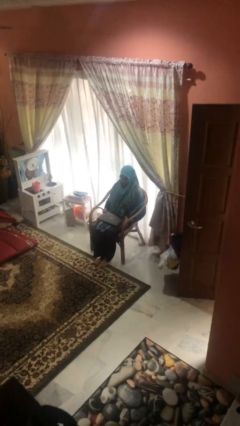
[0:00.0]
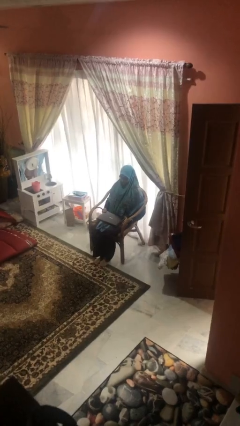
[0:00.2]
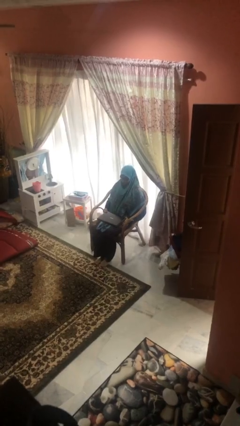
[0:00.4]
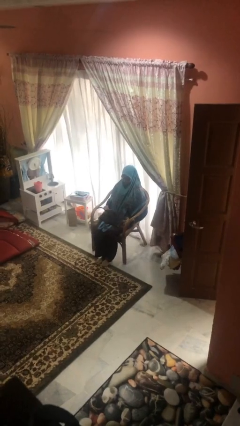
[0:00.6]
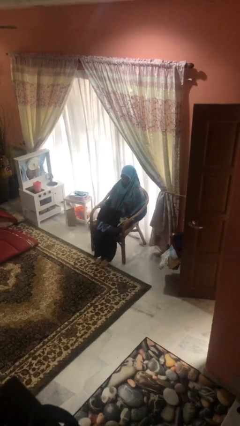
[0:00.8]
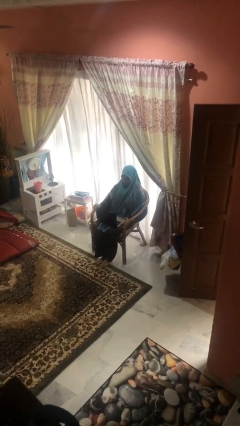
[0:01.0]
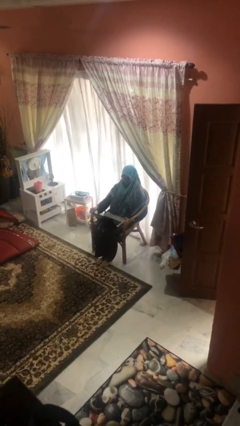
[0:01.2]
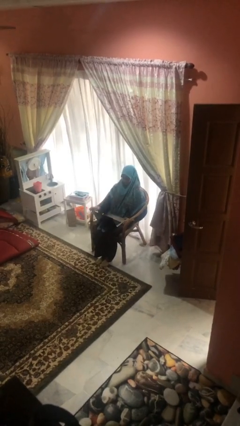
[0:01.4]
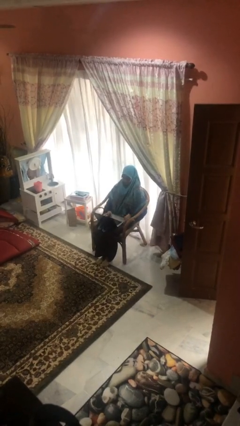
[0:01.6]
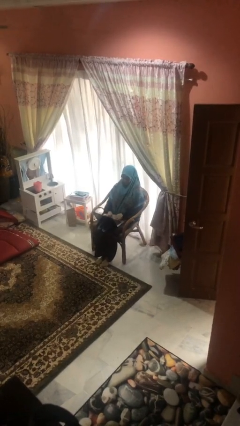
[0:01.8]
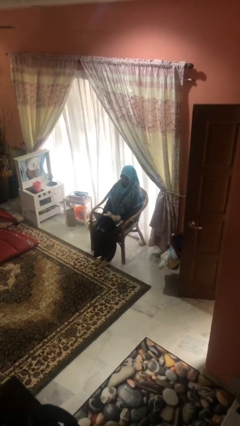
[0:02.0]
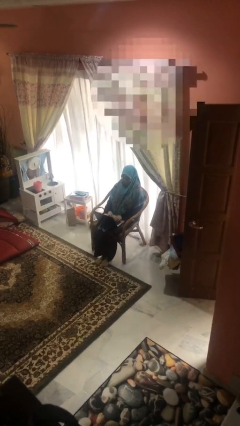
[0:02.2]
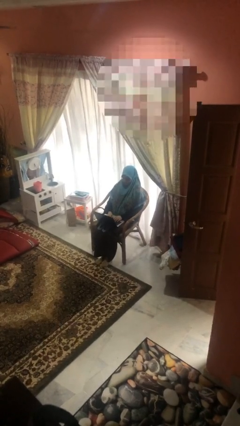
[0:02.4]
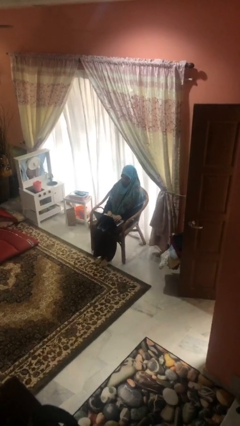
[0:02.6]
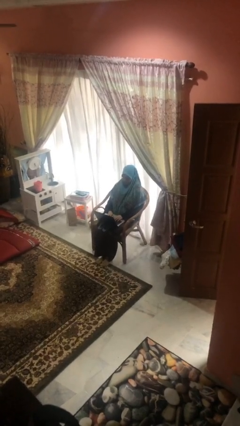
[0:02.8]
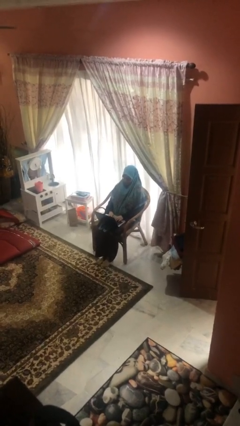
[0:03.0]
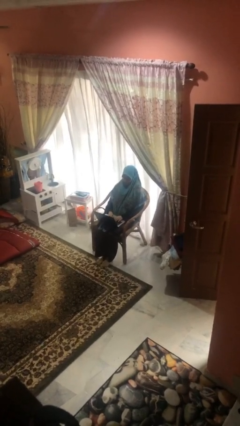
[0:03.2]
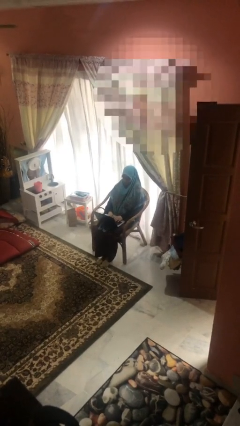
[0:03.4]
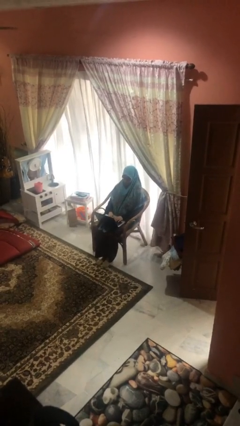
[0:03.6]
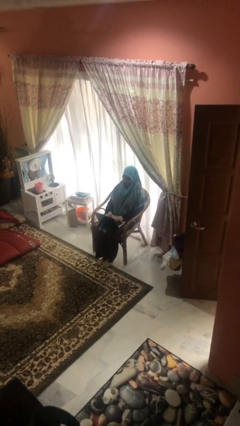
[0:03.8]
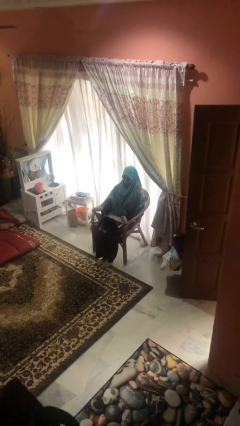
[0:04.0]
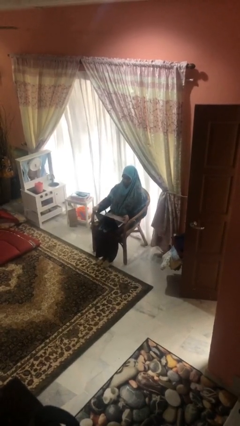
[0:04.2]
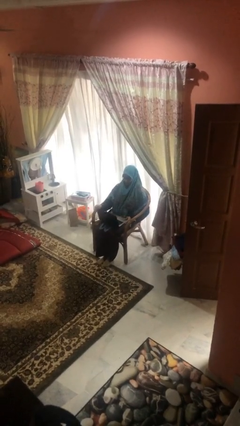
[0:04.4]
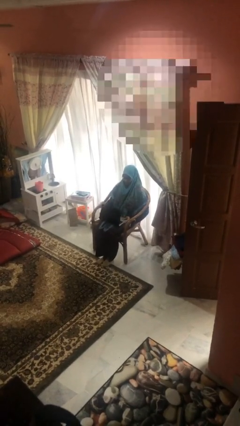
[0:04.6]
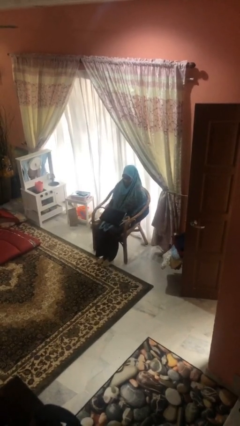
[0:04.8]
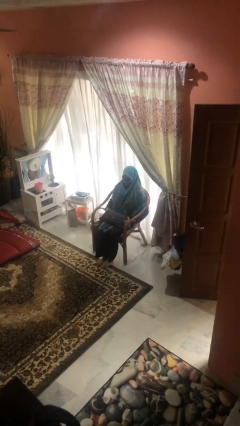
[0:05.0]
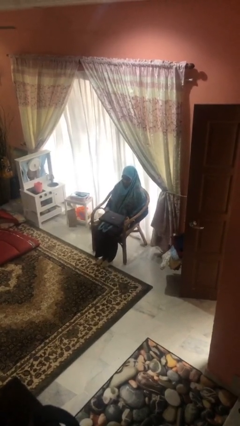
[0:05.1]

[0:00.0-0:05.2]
person interacts with laptop

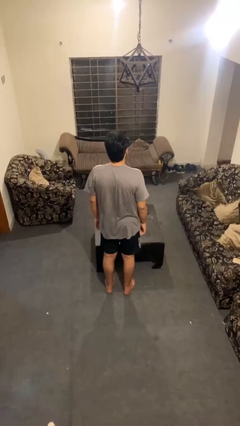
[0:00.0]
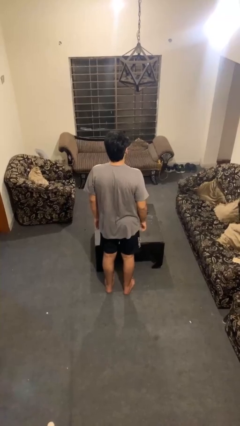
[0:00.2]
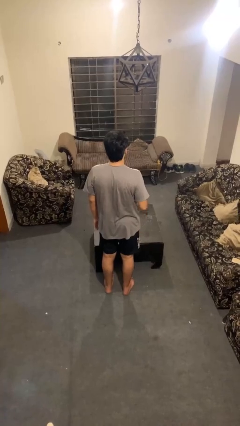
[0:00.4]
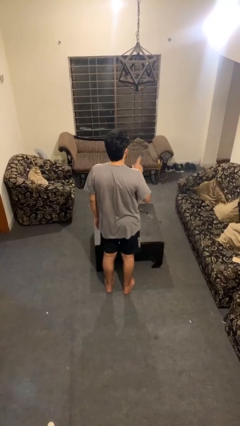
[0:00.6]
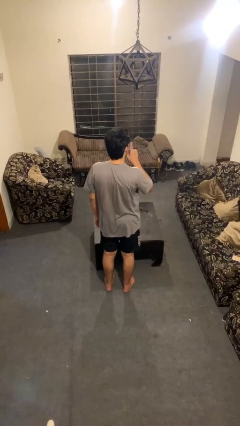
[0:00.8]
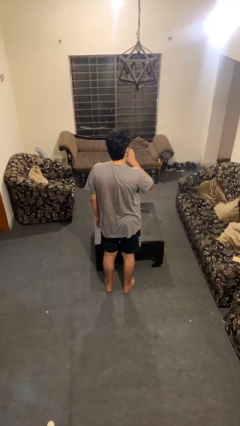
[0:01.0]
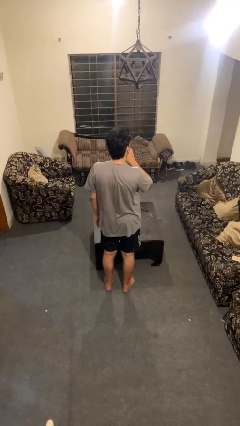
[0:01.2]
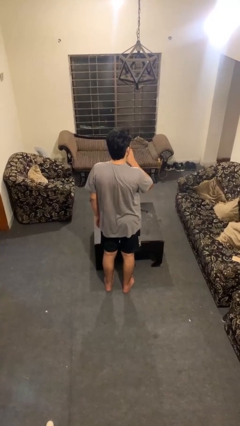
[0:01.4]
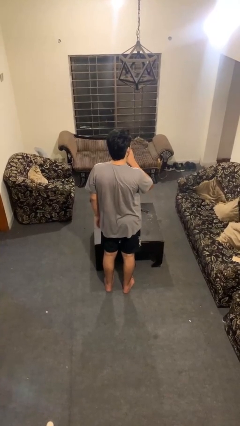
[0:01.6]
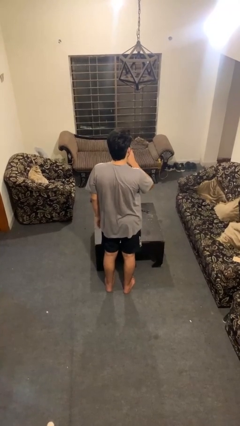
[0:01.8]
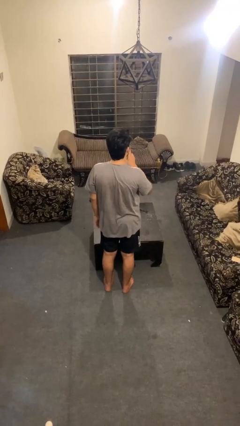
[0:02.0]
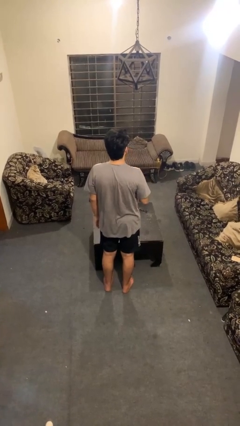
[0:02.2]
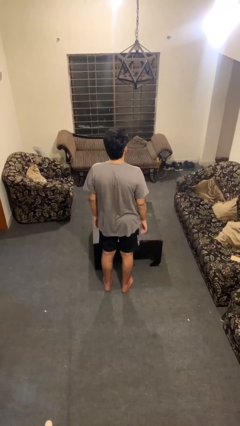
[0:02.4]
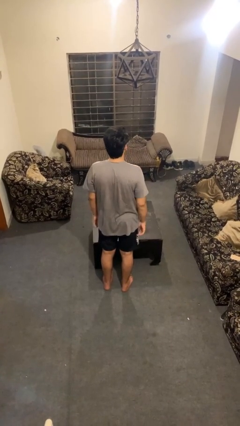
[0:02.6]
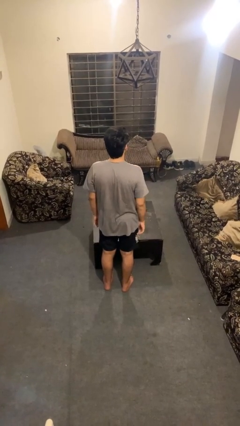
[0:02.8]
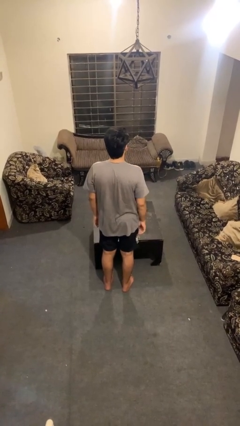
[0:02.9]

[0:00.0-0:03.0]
person gestures be quiet

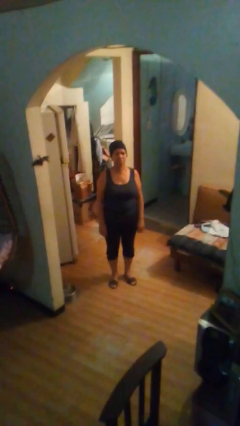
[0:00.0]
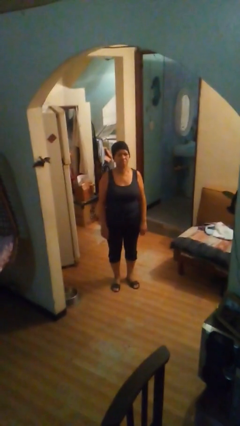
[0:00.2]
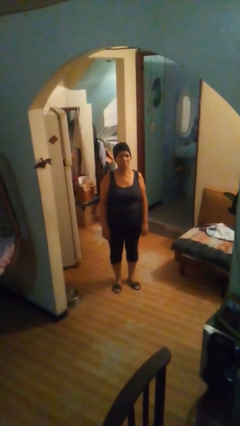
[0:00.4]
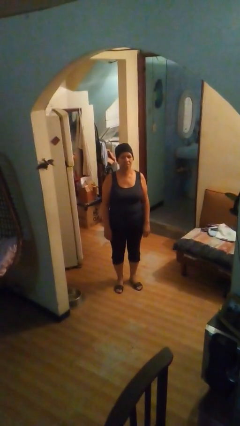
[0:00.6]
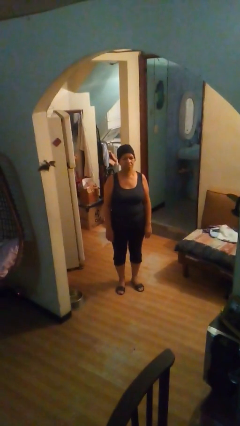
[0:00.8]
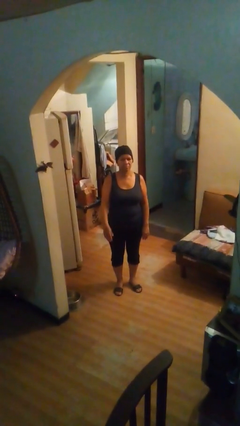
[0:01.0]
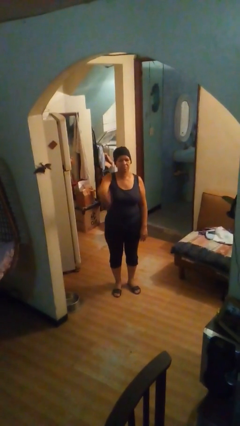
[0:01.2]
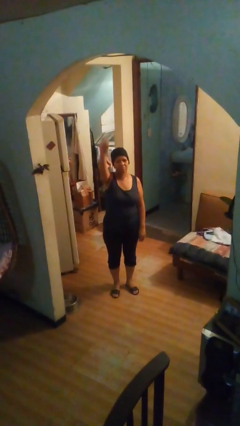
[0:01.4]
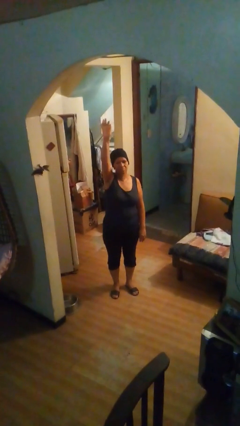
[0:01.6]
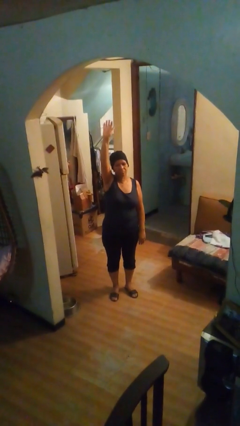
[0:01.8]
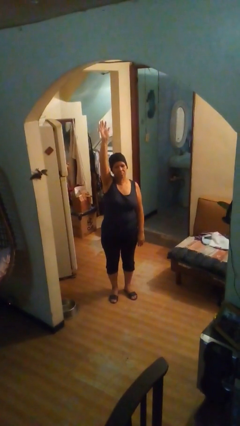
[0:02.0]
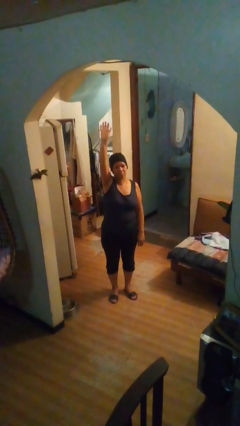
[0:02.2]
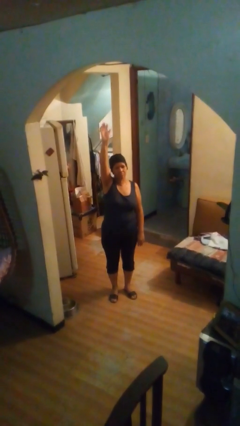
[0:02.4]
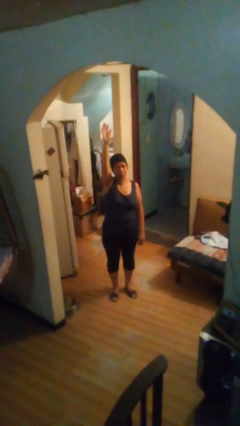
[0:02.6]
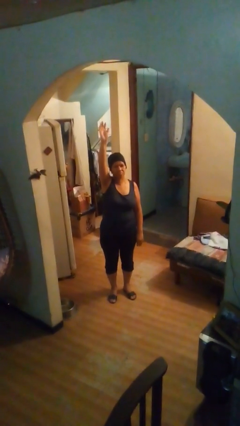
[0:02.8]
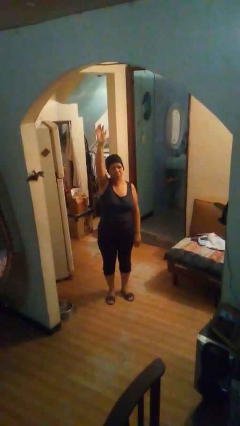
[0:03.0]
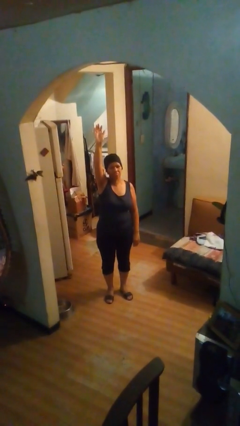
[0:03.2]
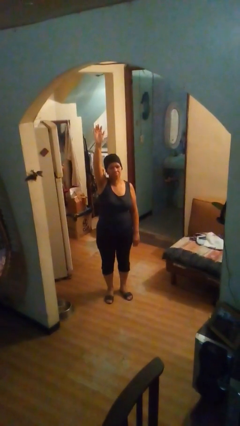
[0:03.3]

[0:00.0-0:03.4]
person gestures raise hand

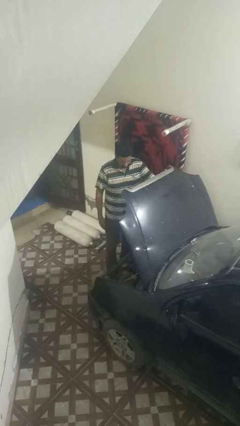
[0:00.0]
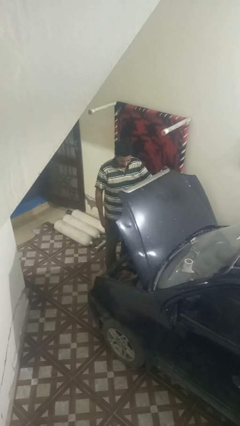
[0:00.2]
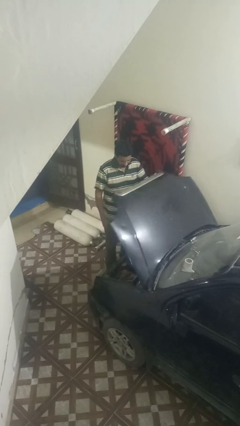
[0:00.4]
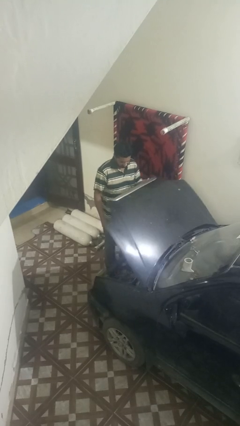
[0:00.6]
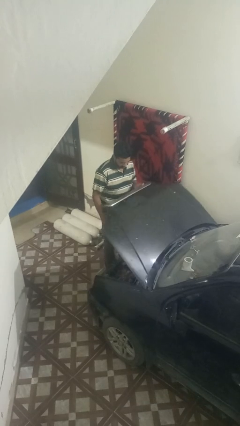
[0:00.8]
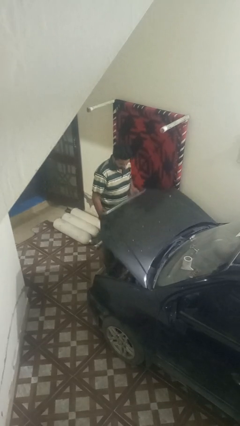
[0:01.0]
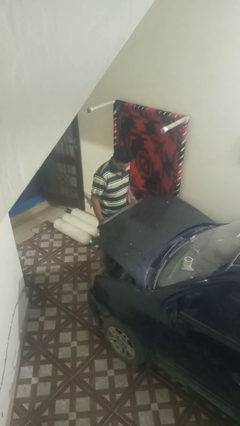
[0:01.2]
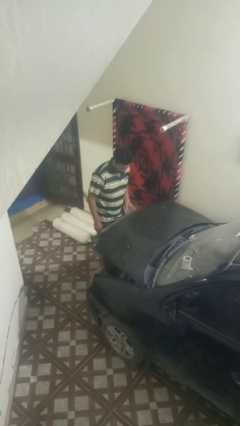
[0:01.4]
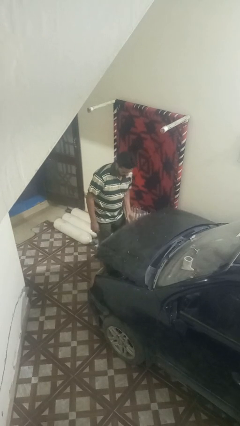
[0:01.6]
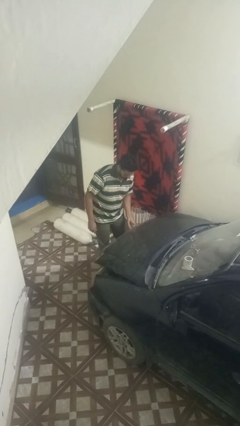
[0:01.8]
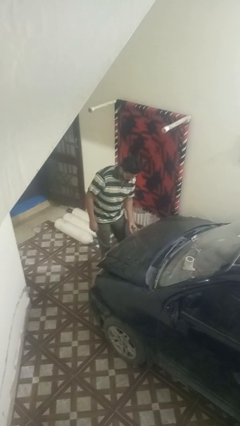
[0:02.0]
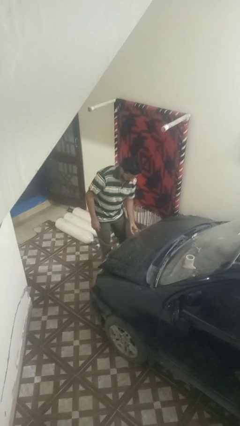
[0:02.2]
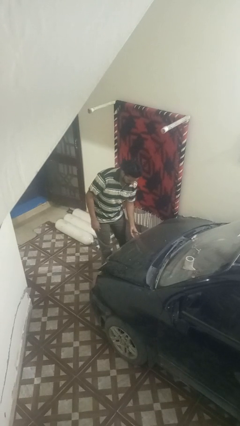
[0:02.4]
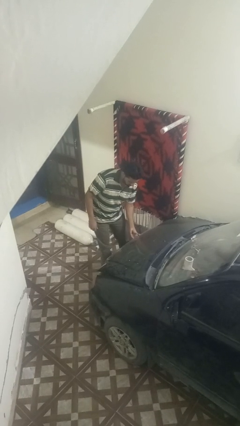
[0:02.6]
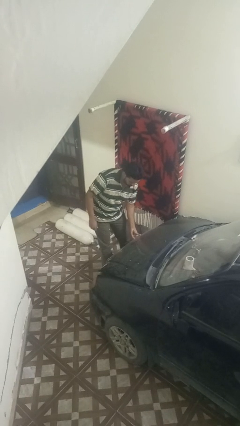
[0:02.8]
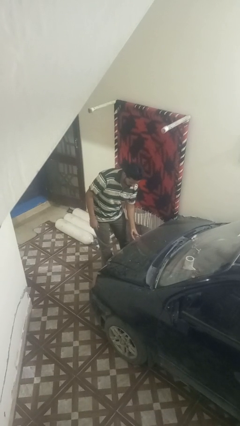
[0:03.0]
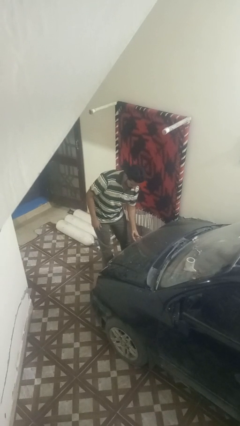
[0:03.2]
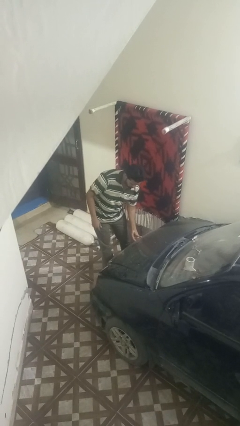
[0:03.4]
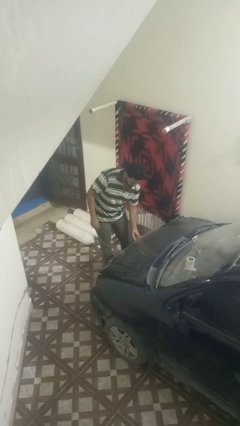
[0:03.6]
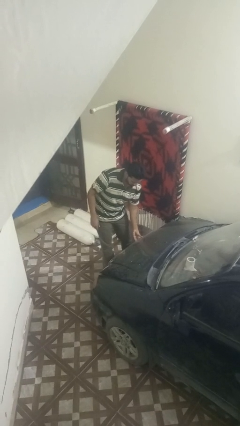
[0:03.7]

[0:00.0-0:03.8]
person closes car hood

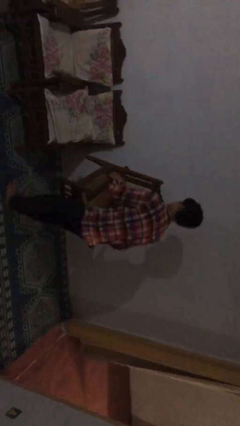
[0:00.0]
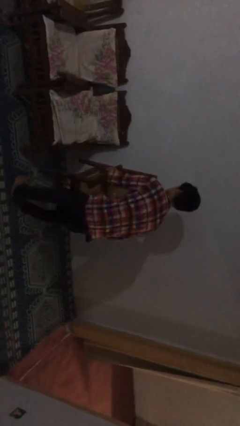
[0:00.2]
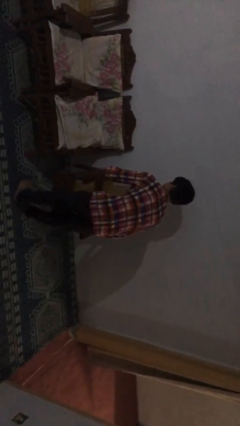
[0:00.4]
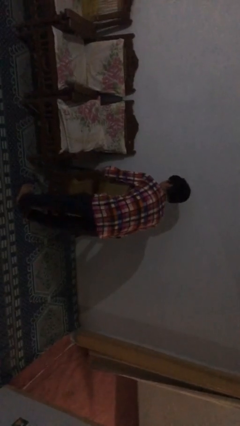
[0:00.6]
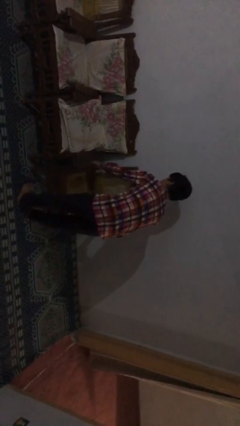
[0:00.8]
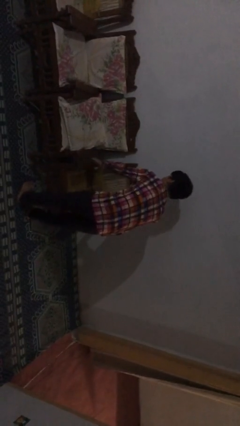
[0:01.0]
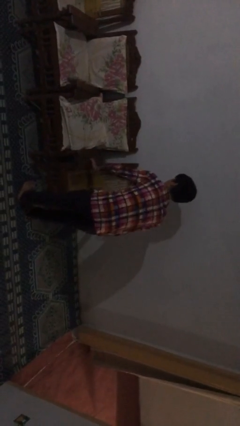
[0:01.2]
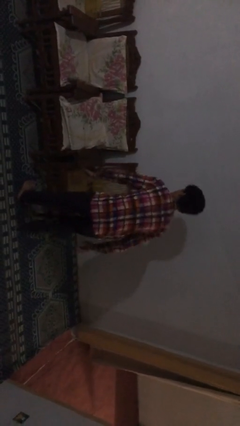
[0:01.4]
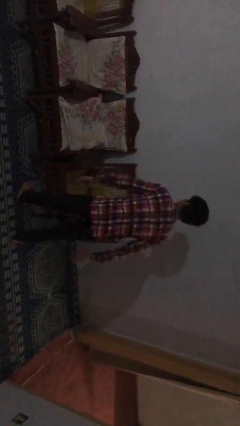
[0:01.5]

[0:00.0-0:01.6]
person puts down object on floor

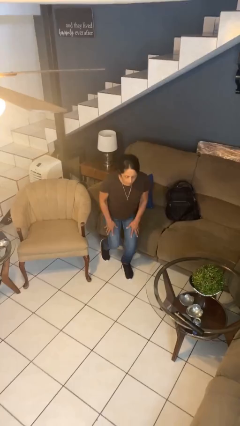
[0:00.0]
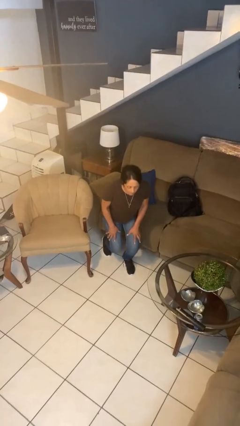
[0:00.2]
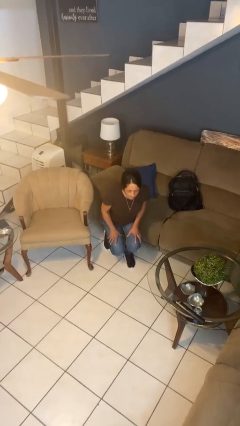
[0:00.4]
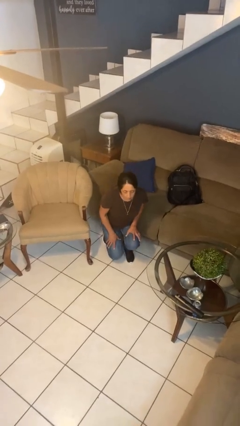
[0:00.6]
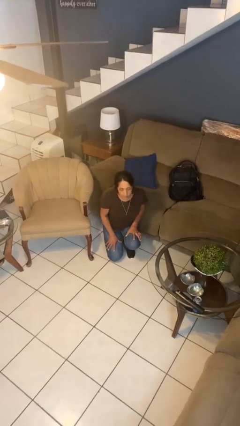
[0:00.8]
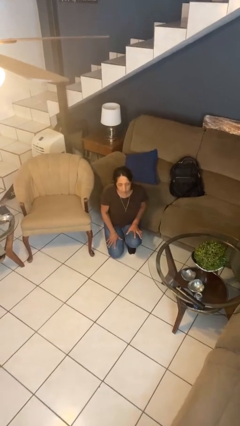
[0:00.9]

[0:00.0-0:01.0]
person kneels
